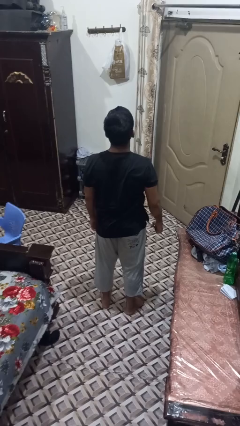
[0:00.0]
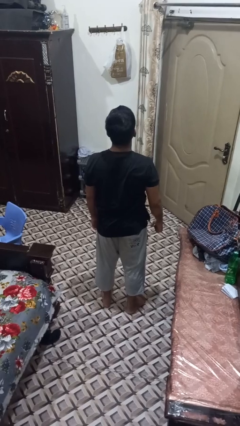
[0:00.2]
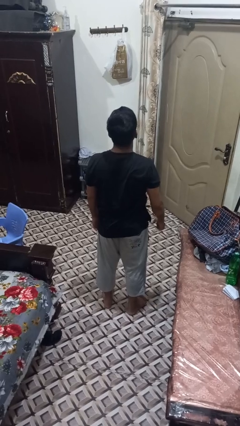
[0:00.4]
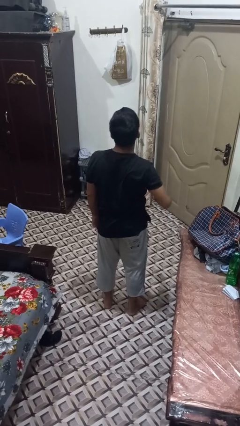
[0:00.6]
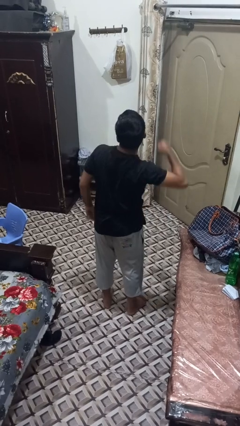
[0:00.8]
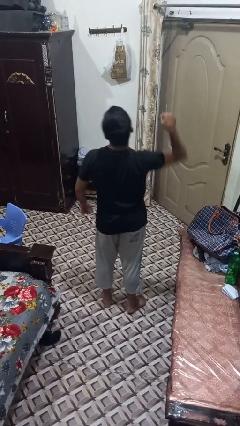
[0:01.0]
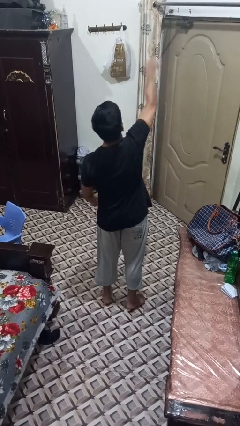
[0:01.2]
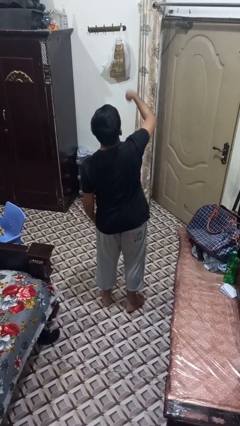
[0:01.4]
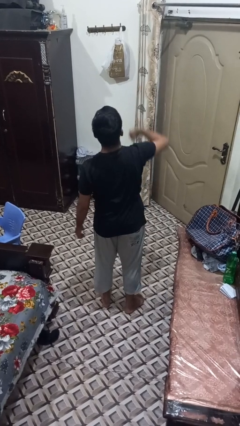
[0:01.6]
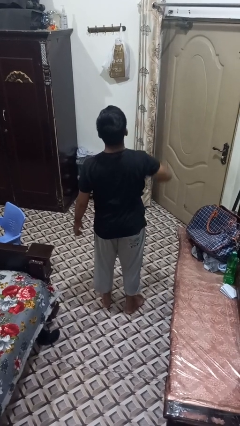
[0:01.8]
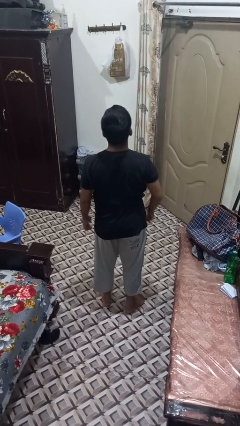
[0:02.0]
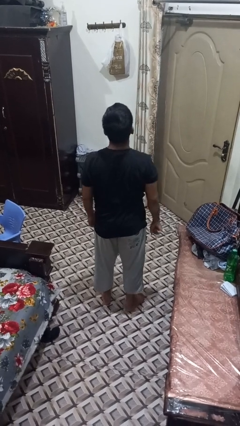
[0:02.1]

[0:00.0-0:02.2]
person punches

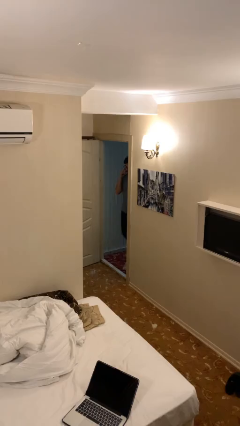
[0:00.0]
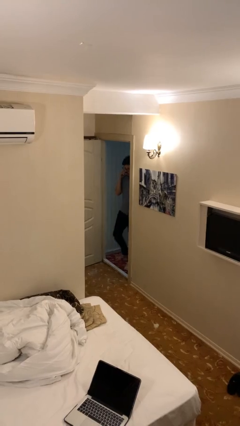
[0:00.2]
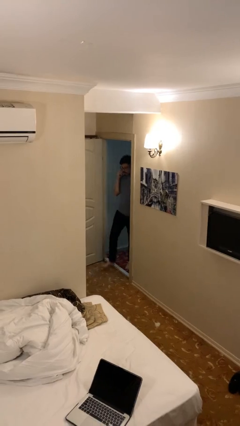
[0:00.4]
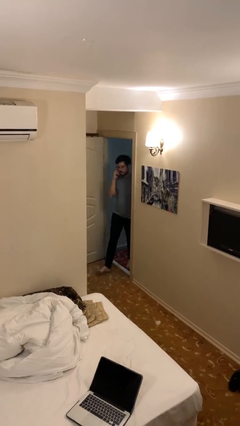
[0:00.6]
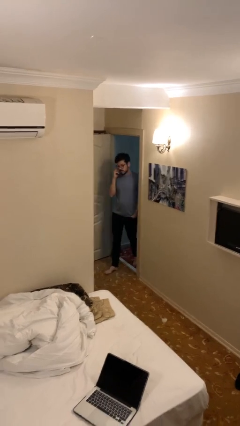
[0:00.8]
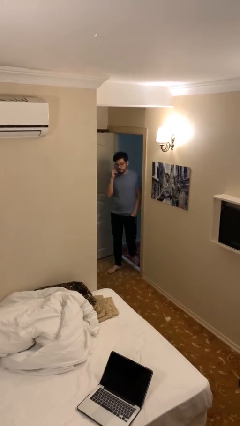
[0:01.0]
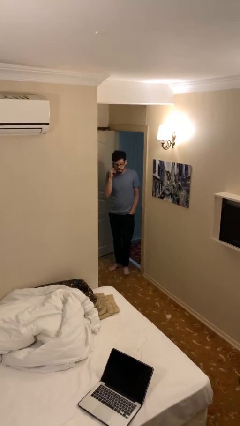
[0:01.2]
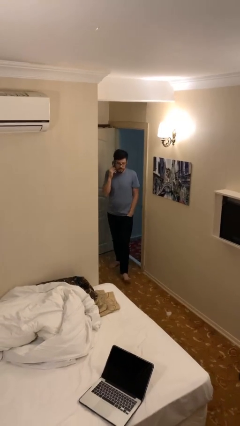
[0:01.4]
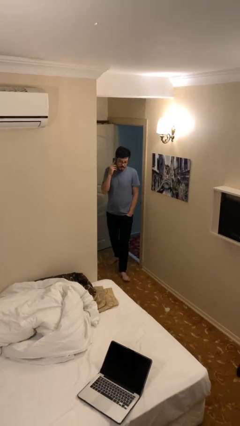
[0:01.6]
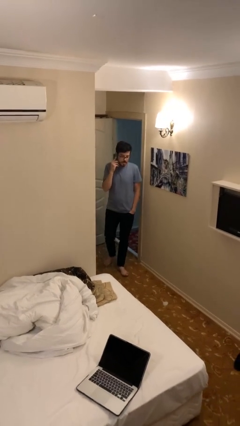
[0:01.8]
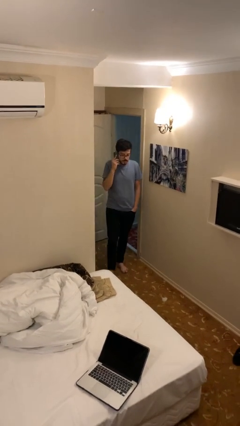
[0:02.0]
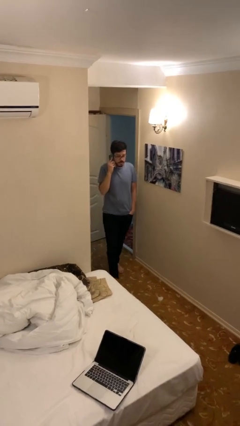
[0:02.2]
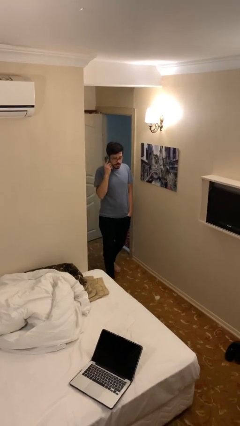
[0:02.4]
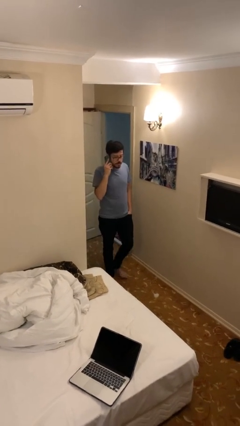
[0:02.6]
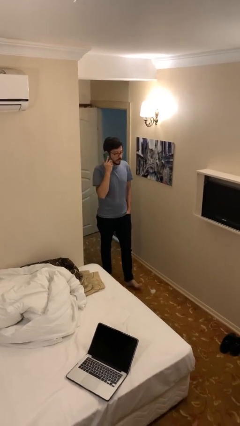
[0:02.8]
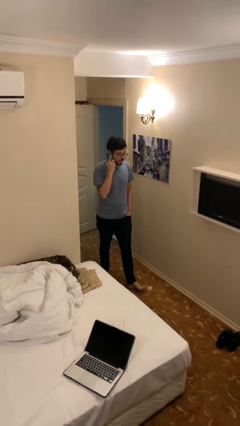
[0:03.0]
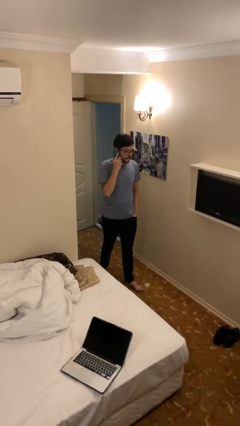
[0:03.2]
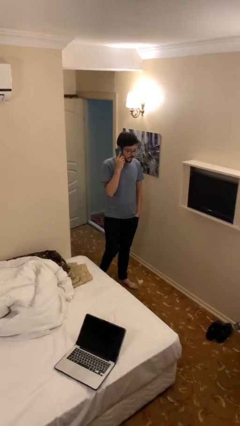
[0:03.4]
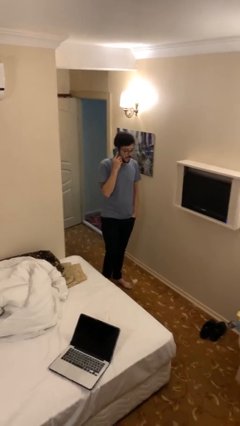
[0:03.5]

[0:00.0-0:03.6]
person enters scene through structure

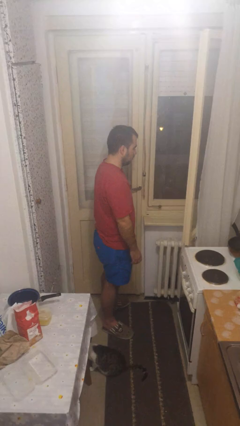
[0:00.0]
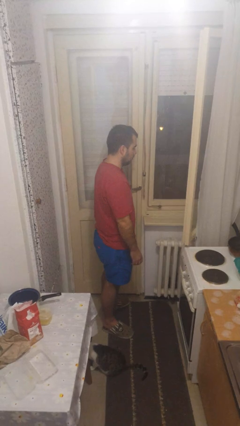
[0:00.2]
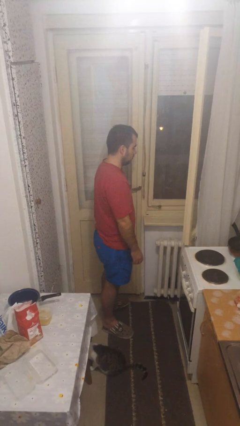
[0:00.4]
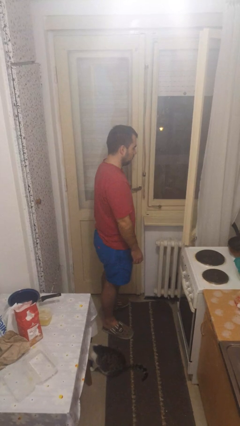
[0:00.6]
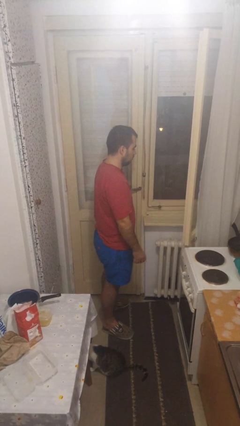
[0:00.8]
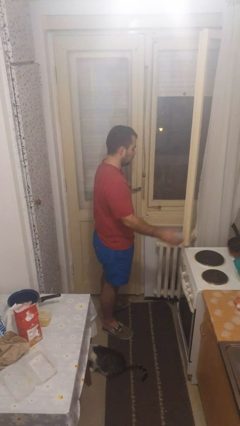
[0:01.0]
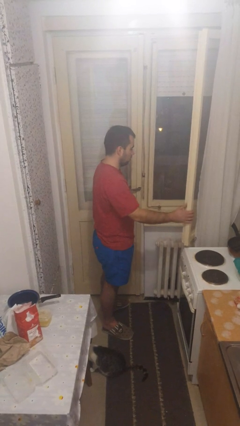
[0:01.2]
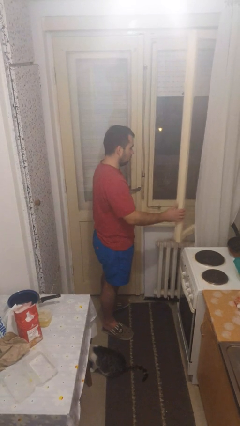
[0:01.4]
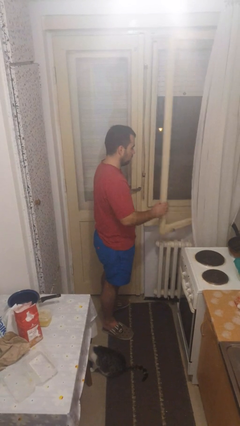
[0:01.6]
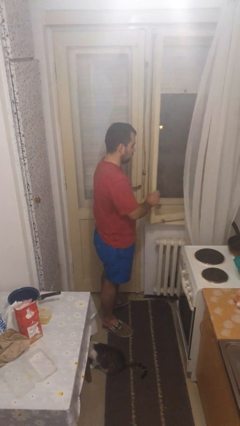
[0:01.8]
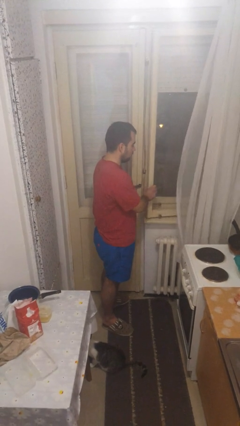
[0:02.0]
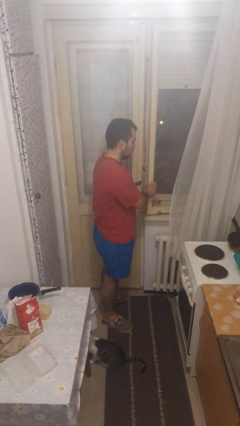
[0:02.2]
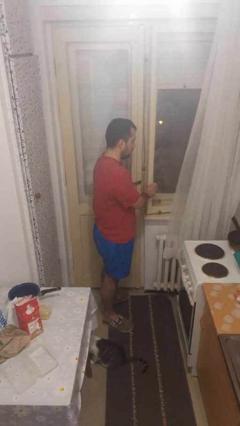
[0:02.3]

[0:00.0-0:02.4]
person closes home window

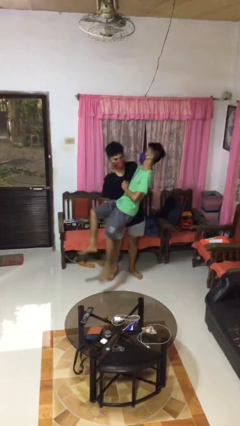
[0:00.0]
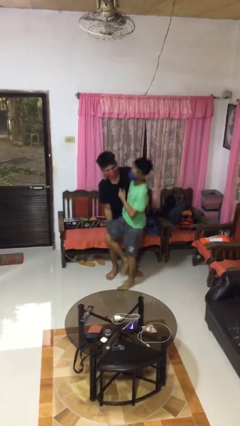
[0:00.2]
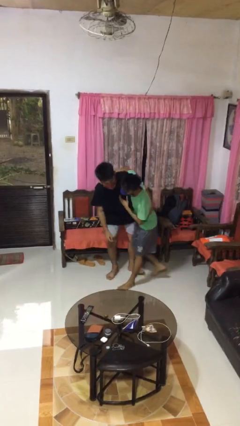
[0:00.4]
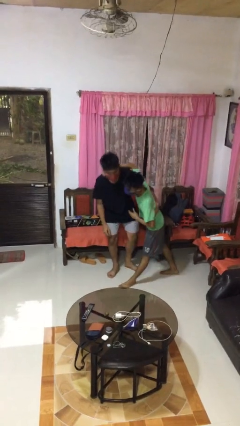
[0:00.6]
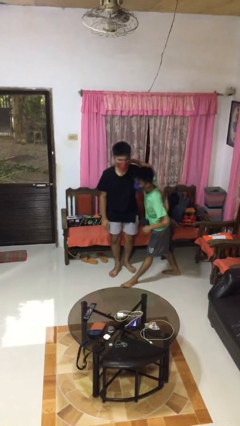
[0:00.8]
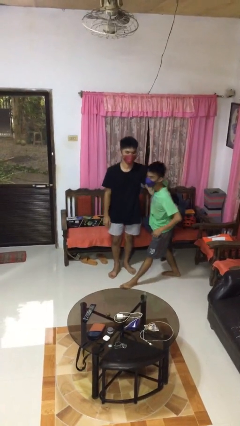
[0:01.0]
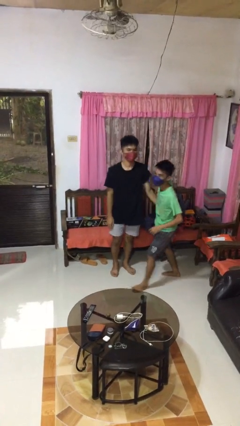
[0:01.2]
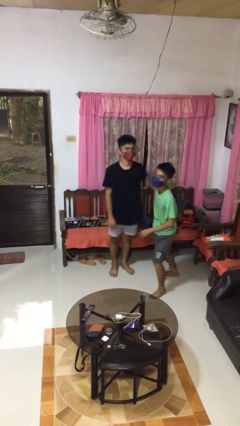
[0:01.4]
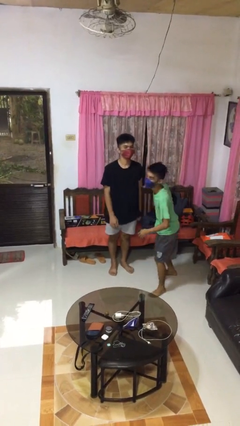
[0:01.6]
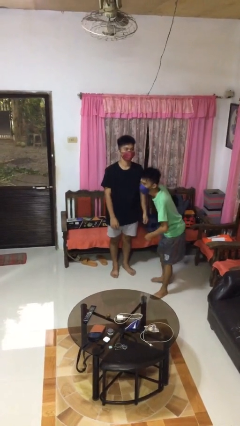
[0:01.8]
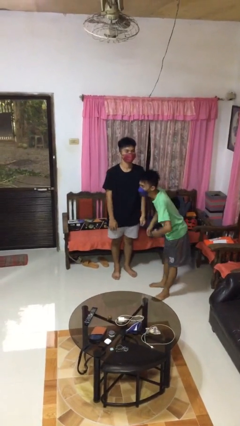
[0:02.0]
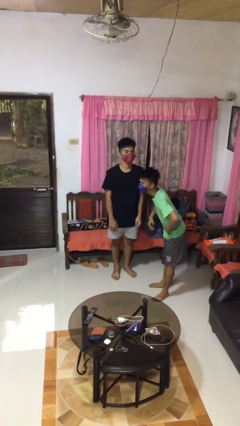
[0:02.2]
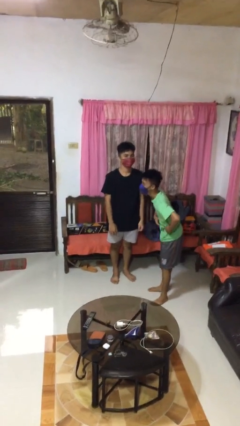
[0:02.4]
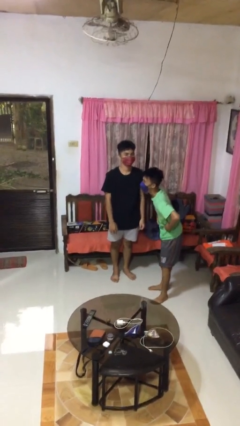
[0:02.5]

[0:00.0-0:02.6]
person puts down person

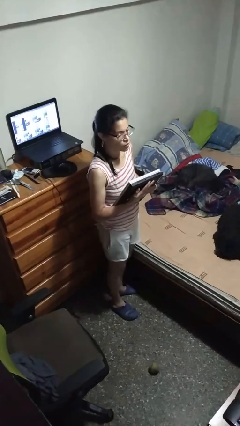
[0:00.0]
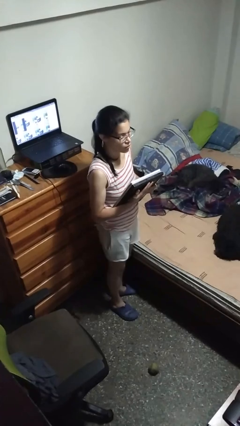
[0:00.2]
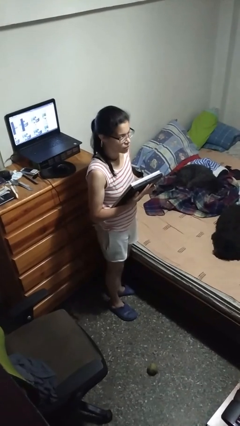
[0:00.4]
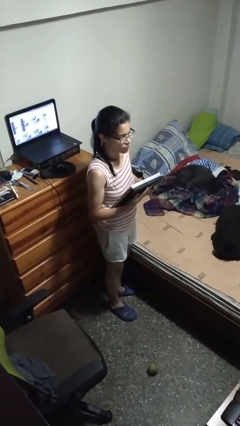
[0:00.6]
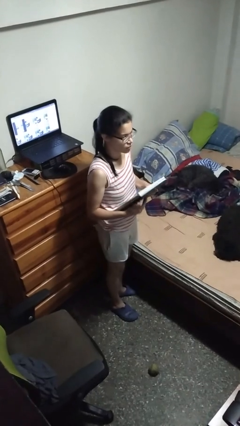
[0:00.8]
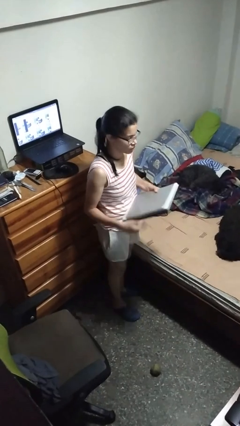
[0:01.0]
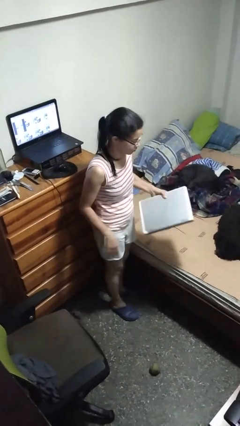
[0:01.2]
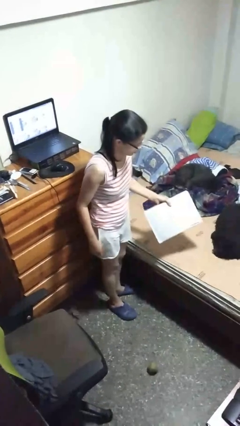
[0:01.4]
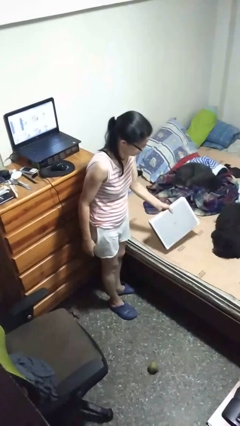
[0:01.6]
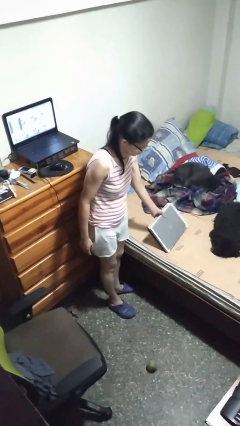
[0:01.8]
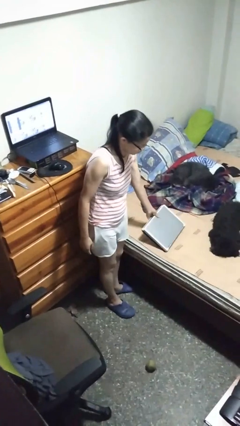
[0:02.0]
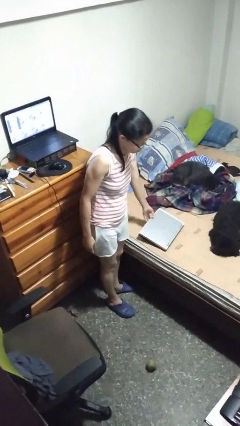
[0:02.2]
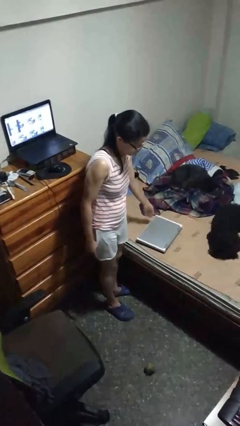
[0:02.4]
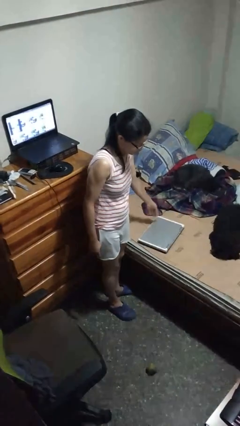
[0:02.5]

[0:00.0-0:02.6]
person puts down object on bed

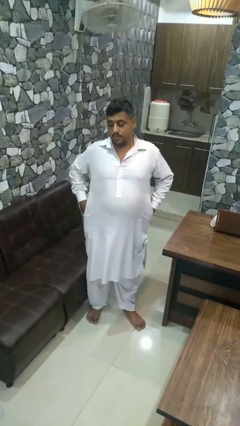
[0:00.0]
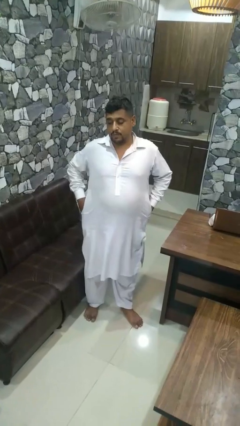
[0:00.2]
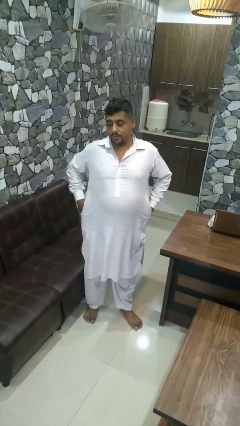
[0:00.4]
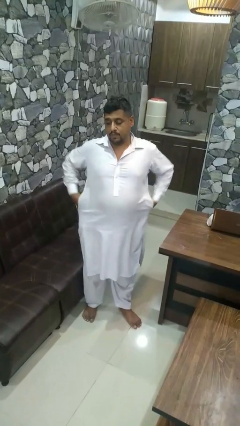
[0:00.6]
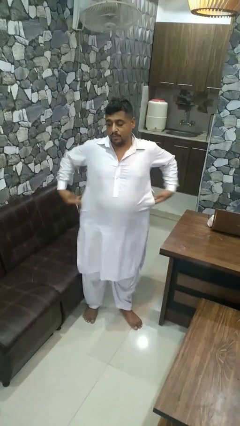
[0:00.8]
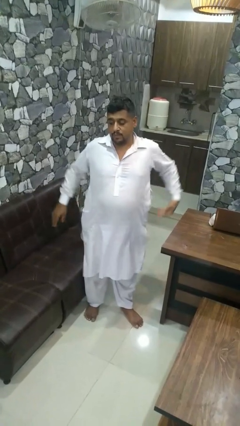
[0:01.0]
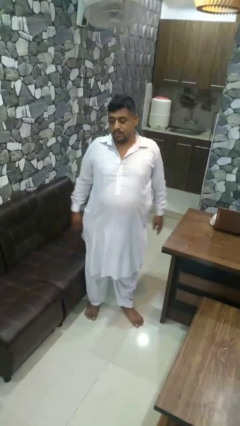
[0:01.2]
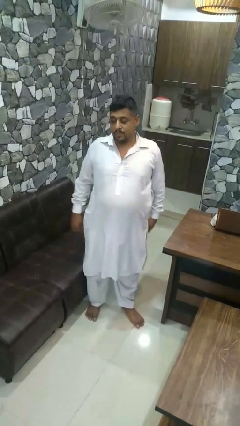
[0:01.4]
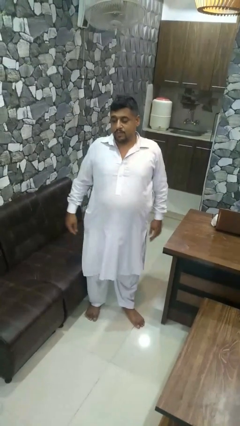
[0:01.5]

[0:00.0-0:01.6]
person puts hands in back pockets

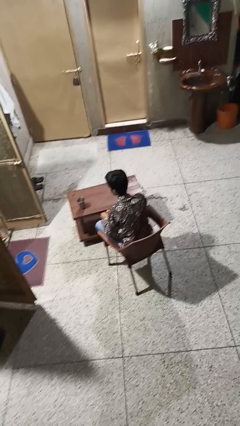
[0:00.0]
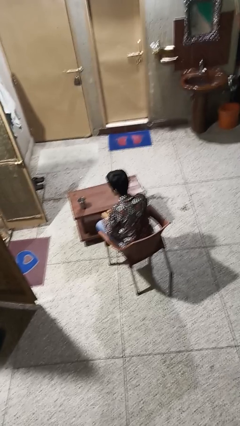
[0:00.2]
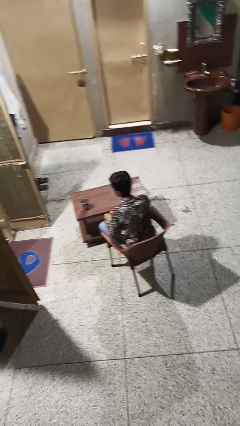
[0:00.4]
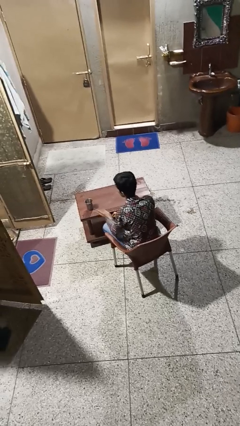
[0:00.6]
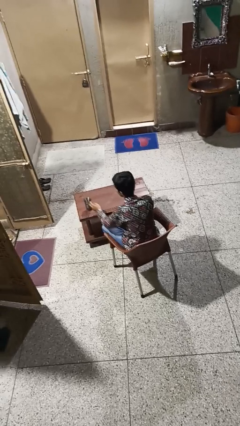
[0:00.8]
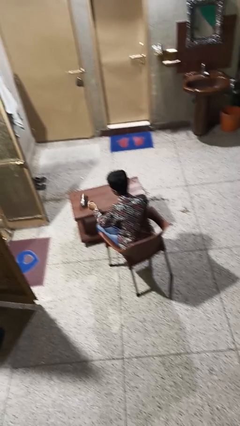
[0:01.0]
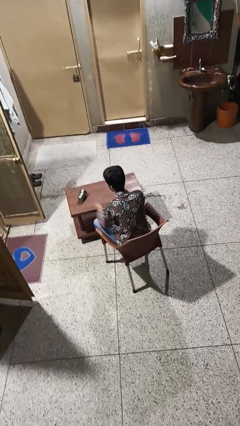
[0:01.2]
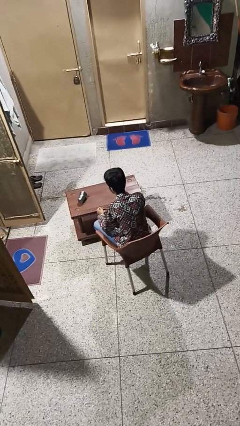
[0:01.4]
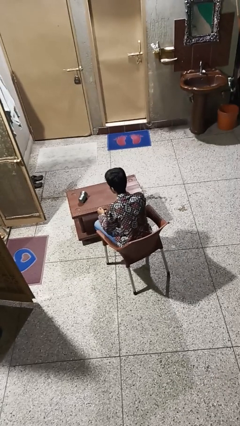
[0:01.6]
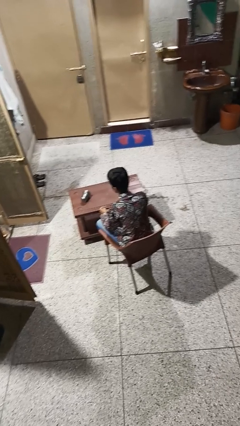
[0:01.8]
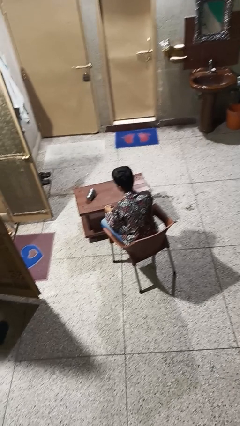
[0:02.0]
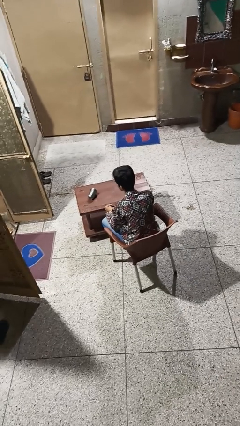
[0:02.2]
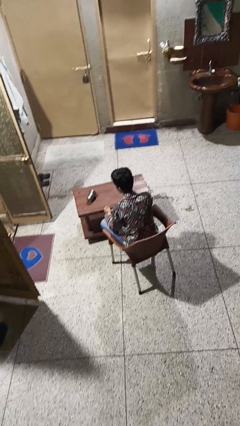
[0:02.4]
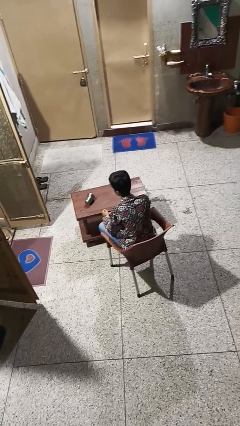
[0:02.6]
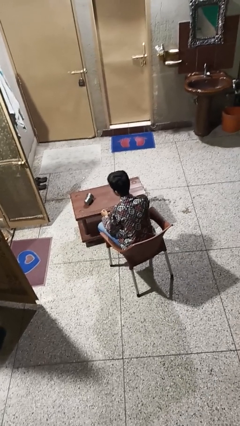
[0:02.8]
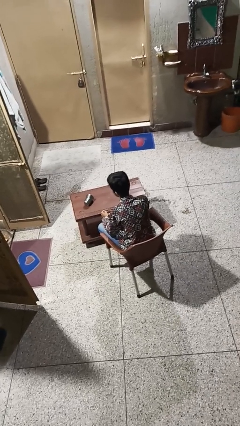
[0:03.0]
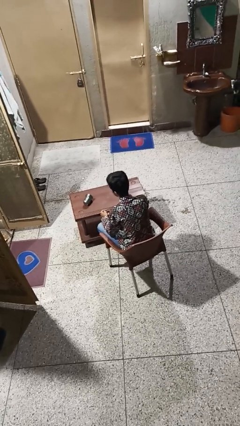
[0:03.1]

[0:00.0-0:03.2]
person knocks over glass
